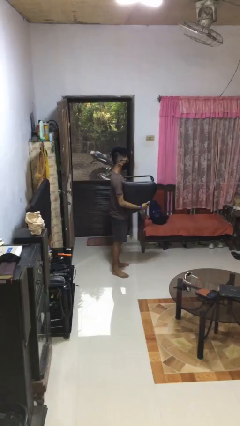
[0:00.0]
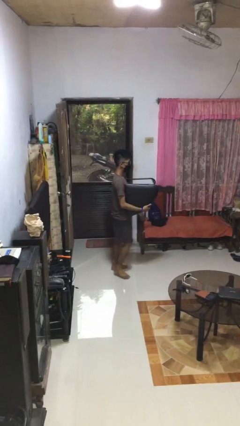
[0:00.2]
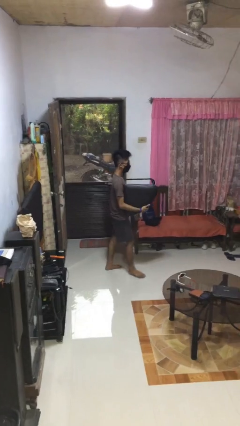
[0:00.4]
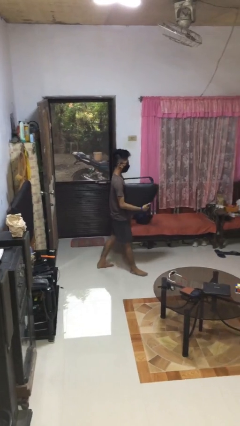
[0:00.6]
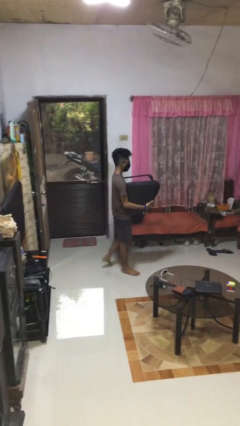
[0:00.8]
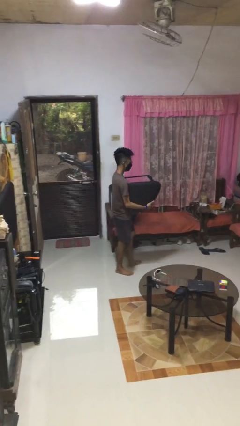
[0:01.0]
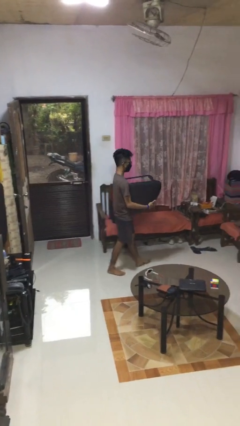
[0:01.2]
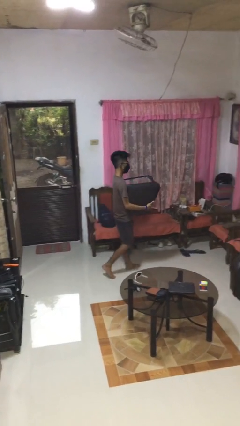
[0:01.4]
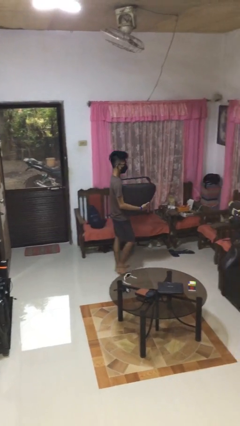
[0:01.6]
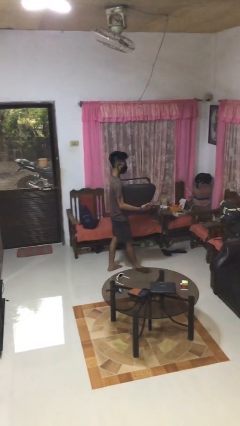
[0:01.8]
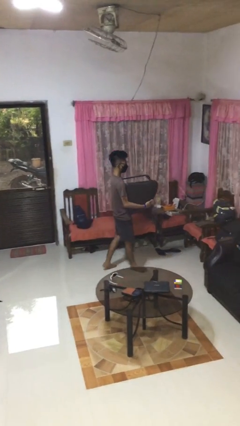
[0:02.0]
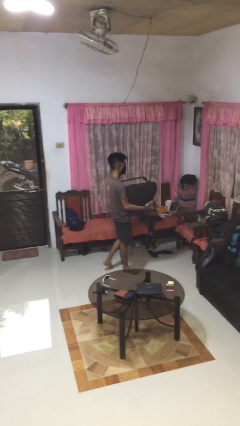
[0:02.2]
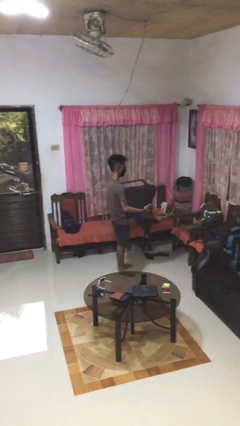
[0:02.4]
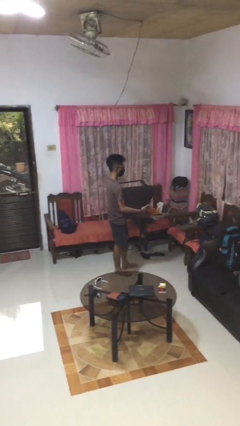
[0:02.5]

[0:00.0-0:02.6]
person carries furniture

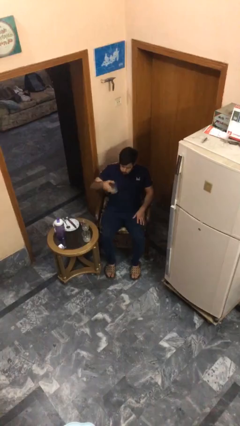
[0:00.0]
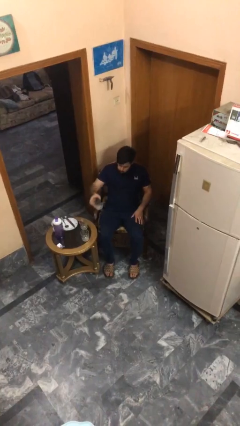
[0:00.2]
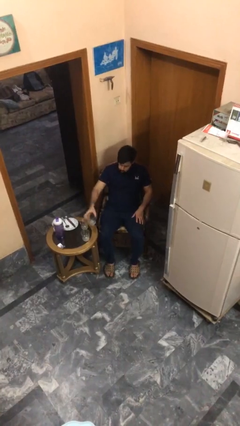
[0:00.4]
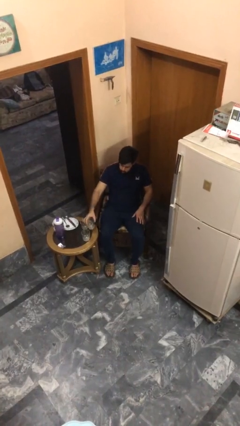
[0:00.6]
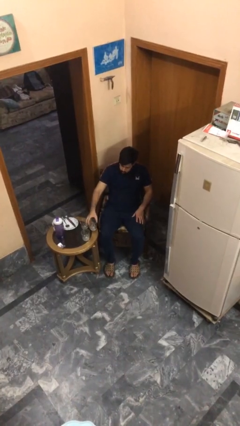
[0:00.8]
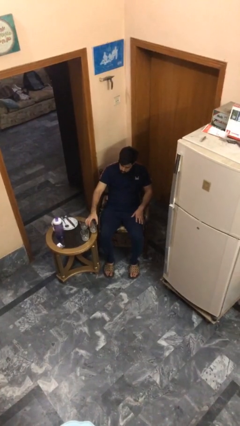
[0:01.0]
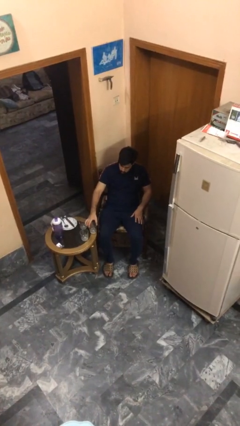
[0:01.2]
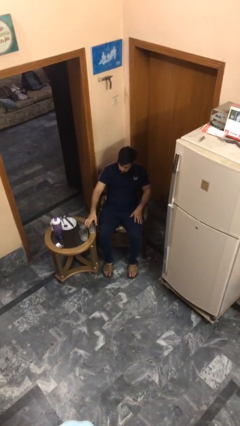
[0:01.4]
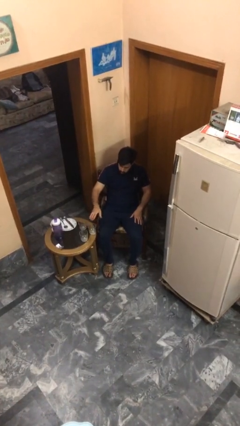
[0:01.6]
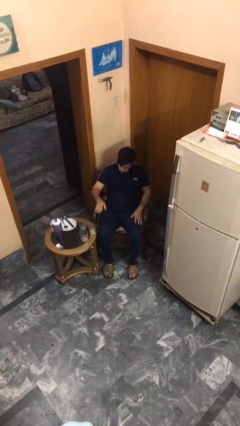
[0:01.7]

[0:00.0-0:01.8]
person puts down object on table

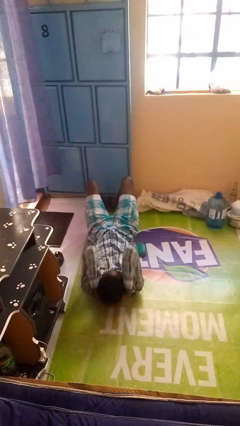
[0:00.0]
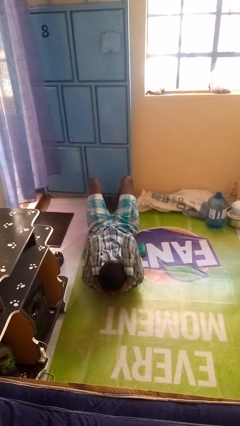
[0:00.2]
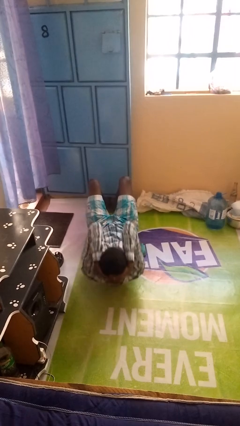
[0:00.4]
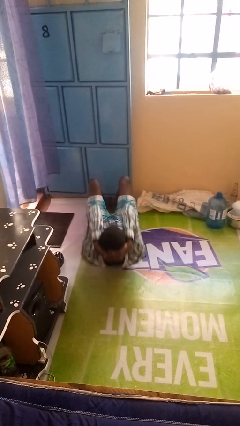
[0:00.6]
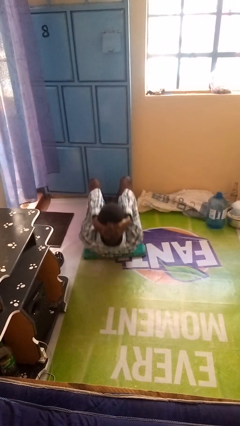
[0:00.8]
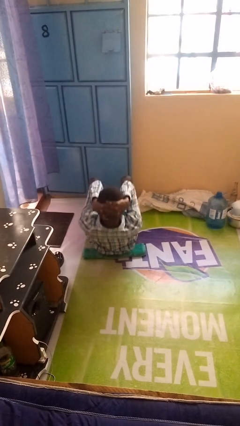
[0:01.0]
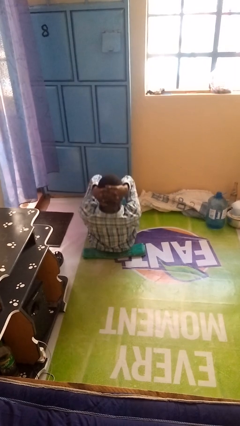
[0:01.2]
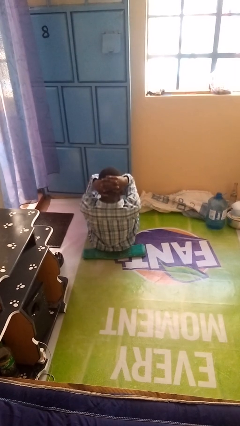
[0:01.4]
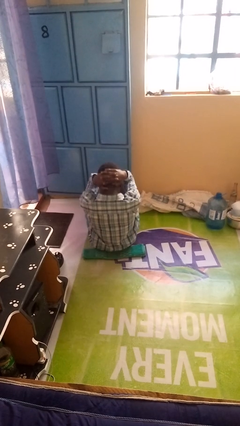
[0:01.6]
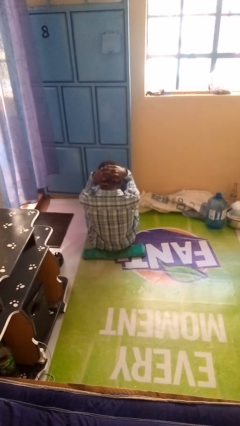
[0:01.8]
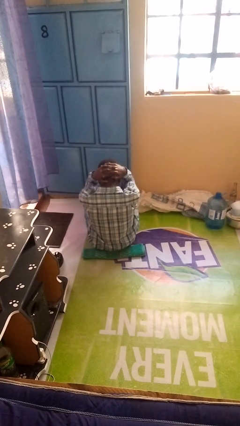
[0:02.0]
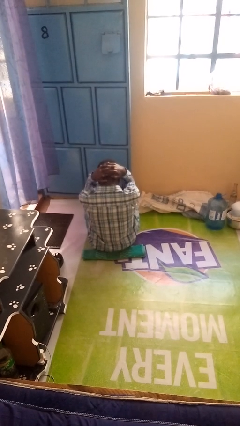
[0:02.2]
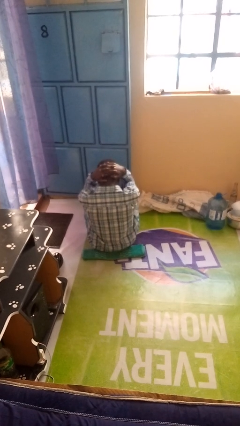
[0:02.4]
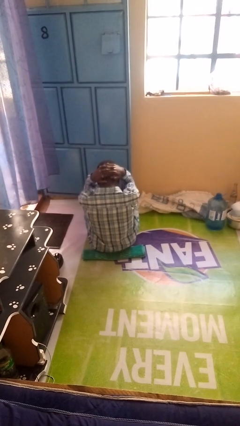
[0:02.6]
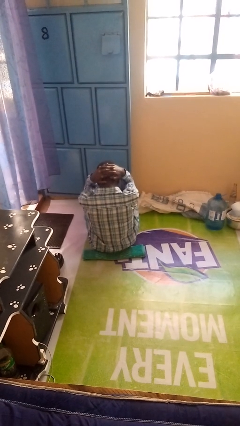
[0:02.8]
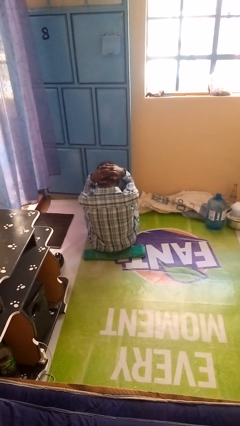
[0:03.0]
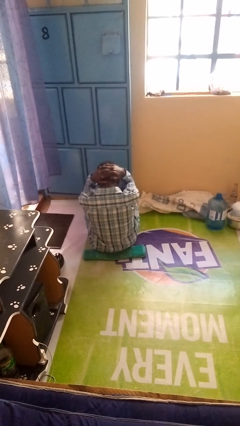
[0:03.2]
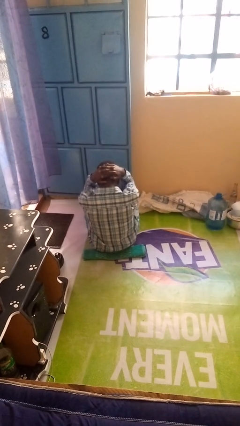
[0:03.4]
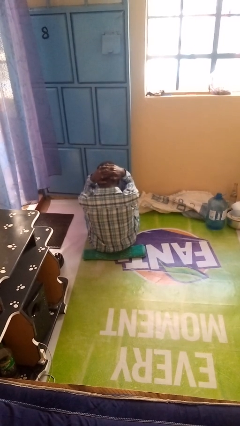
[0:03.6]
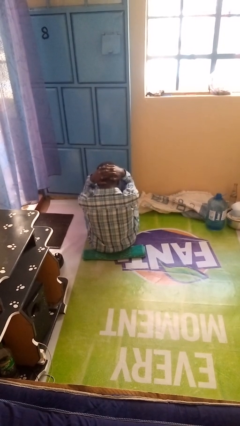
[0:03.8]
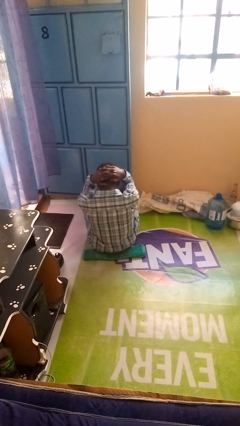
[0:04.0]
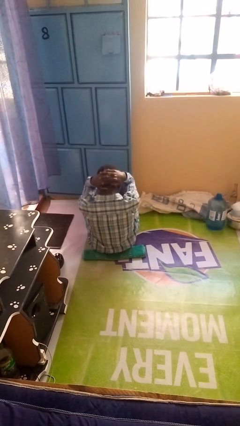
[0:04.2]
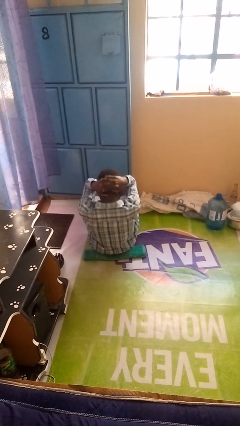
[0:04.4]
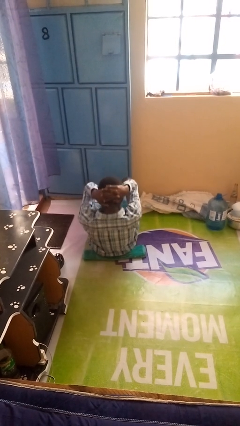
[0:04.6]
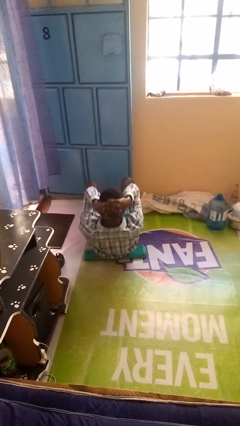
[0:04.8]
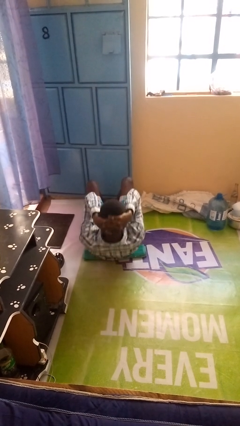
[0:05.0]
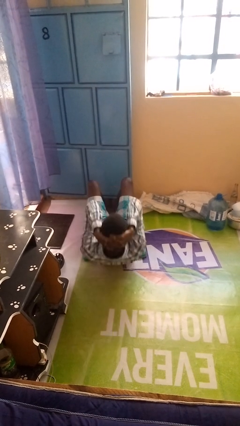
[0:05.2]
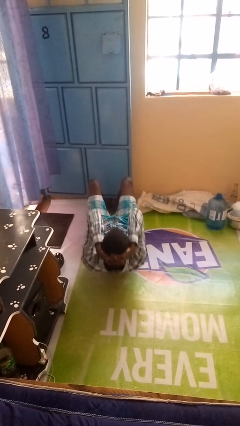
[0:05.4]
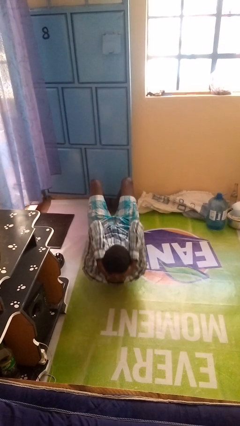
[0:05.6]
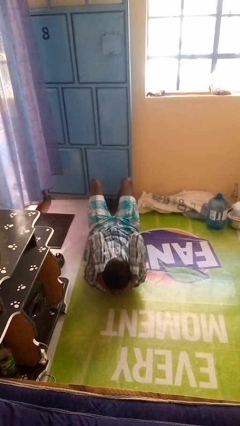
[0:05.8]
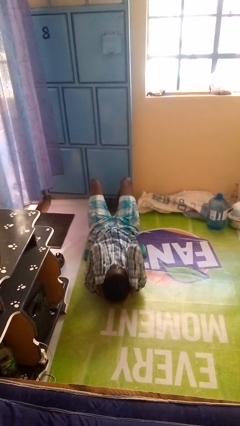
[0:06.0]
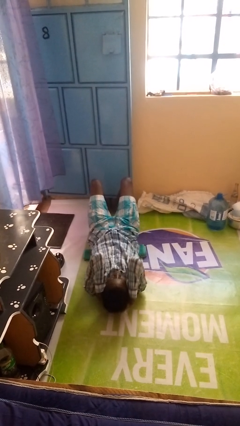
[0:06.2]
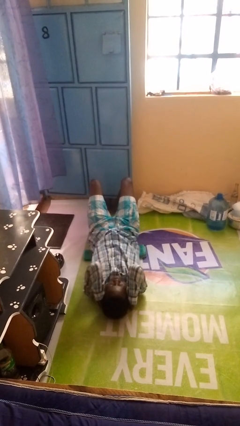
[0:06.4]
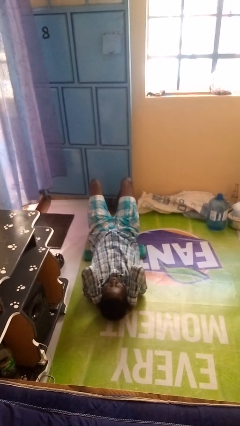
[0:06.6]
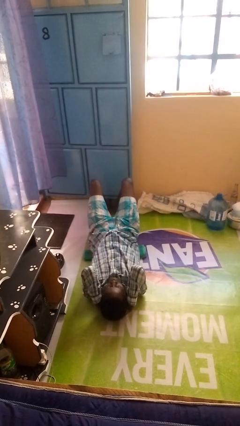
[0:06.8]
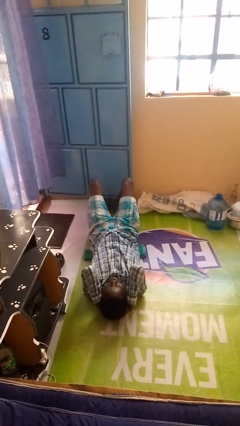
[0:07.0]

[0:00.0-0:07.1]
person exercises with situp

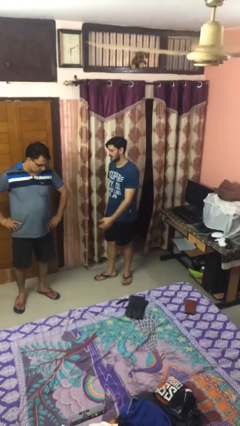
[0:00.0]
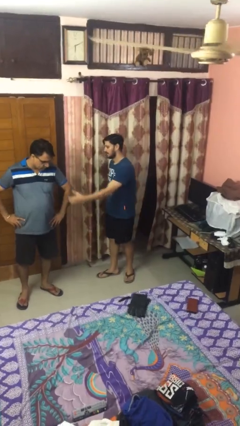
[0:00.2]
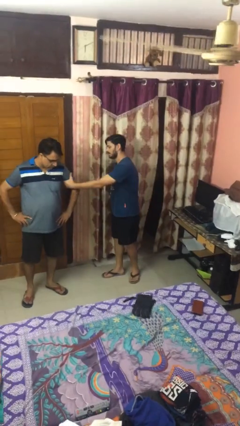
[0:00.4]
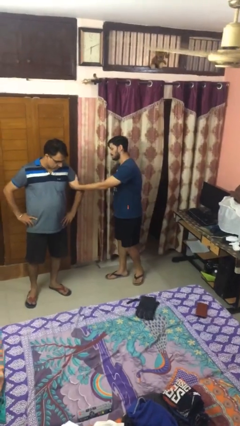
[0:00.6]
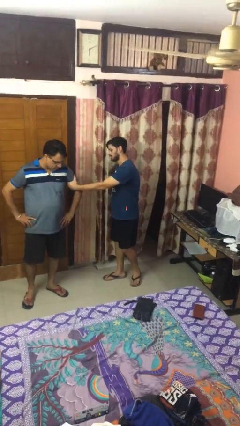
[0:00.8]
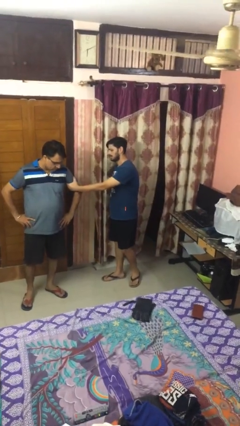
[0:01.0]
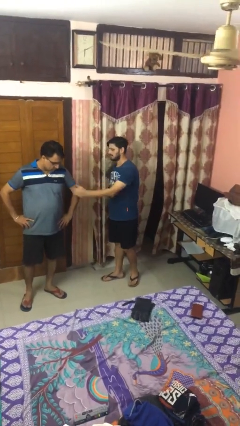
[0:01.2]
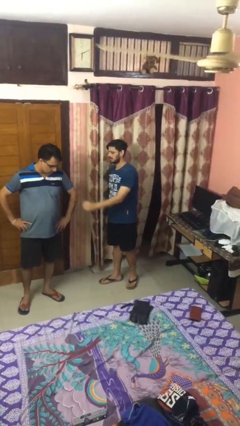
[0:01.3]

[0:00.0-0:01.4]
person grabs person by bicep

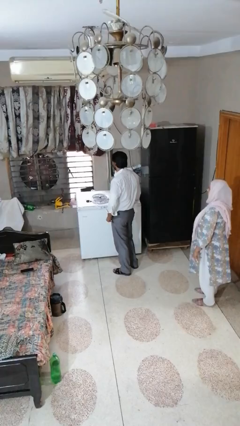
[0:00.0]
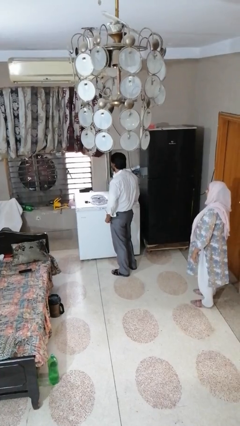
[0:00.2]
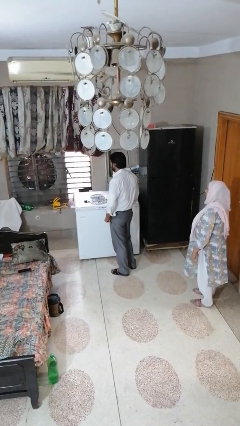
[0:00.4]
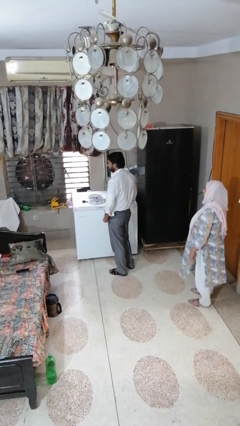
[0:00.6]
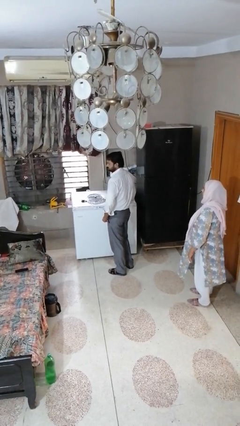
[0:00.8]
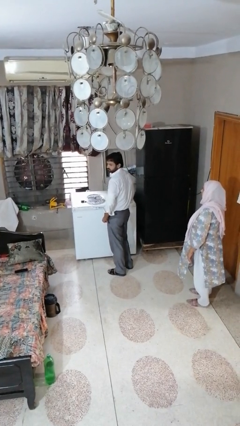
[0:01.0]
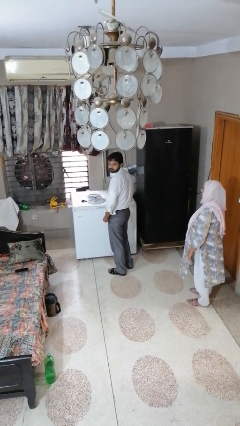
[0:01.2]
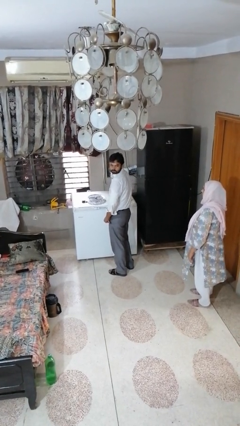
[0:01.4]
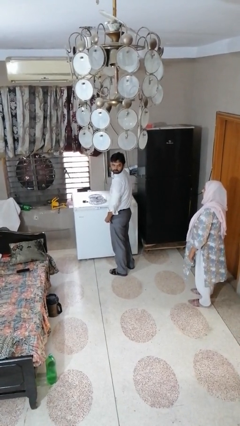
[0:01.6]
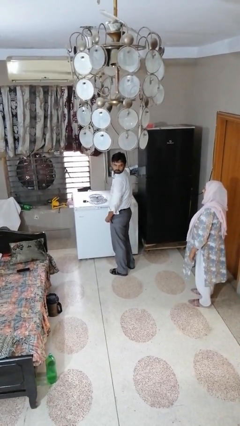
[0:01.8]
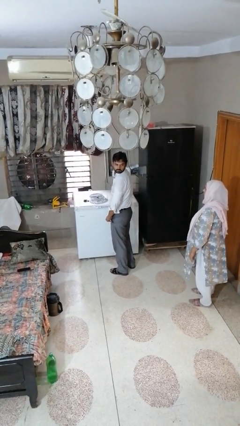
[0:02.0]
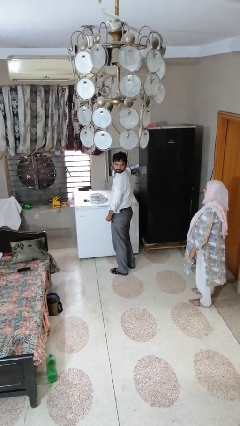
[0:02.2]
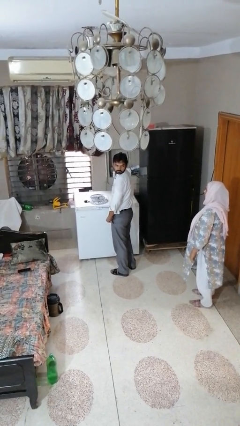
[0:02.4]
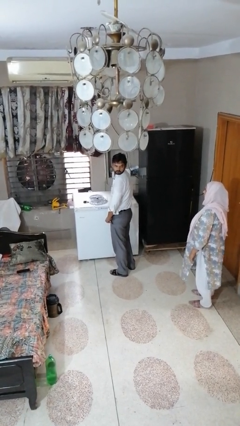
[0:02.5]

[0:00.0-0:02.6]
person looks over shoulder

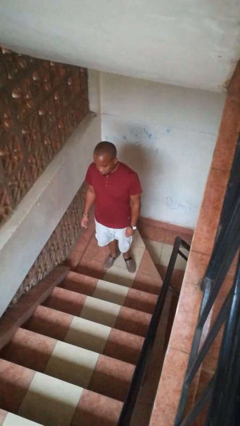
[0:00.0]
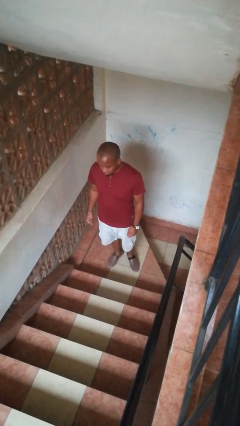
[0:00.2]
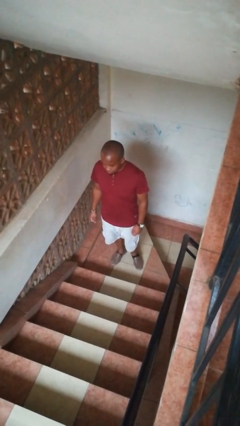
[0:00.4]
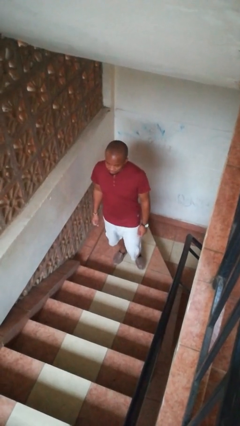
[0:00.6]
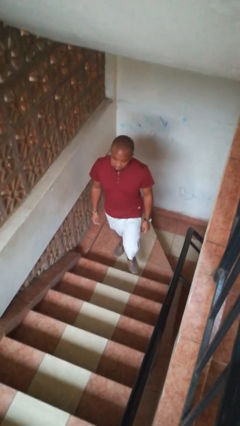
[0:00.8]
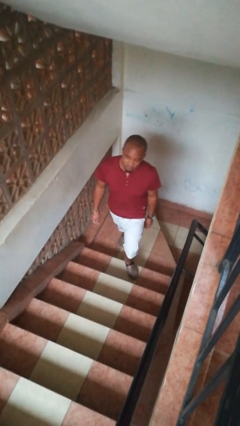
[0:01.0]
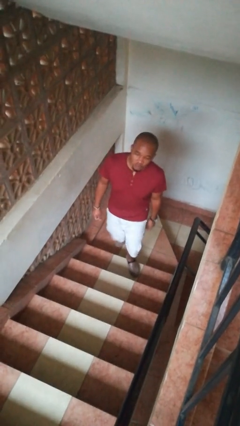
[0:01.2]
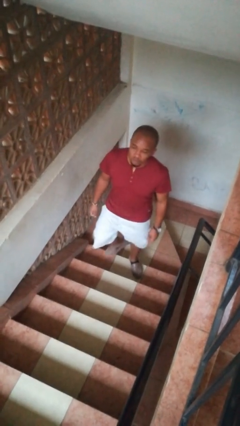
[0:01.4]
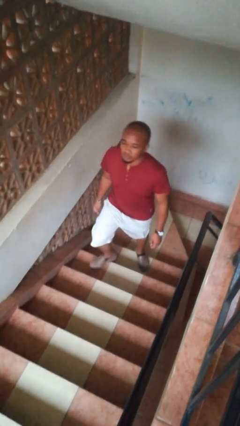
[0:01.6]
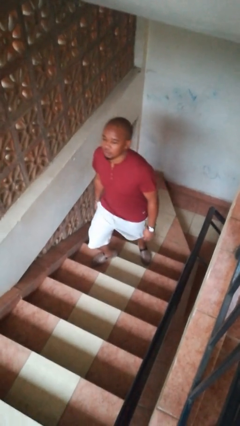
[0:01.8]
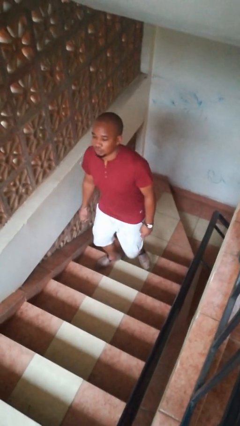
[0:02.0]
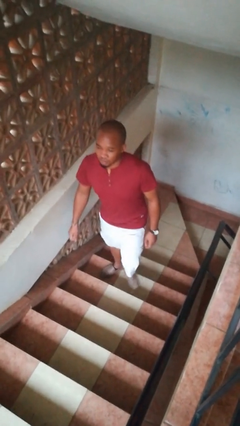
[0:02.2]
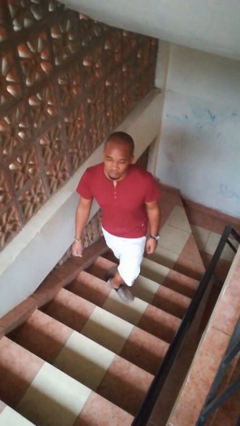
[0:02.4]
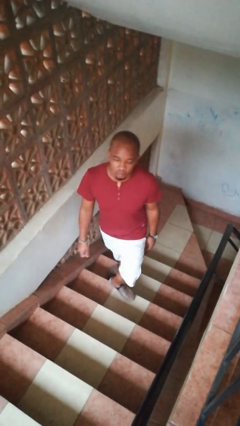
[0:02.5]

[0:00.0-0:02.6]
person climbs up stairs
